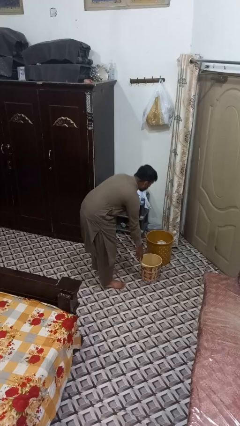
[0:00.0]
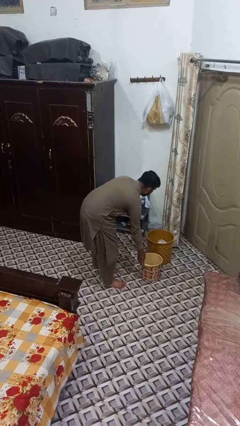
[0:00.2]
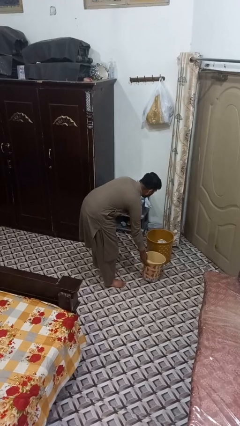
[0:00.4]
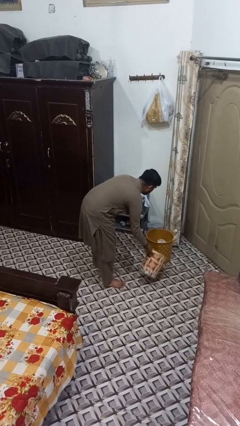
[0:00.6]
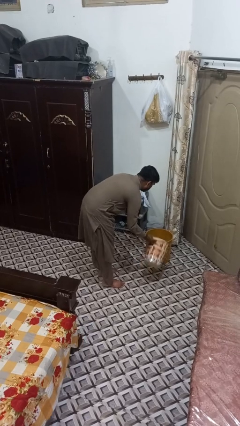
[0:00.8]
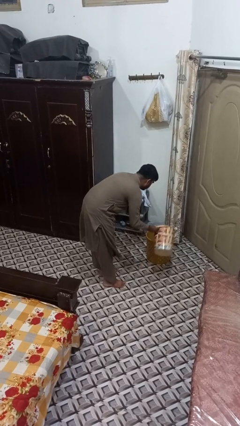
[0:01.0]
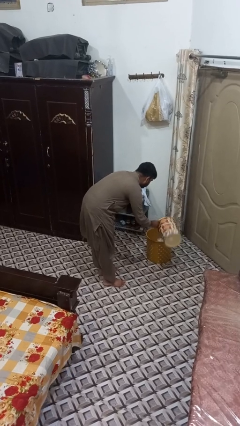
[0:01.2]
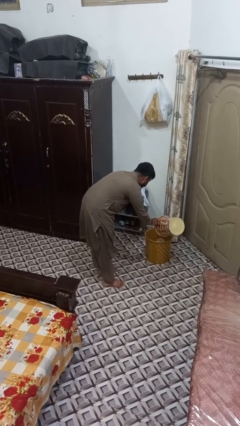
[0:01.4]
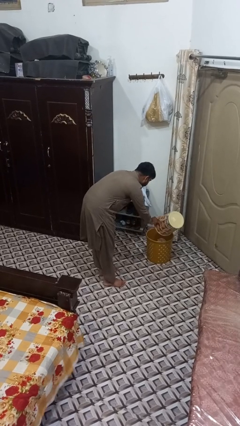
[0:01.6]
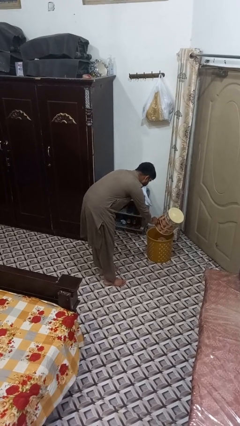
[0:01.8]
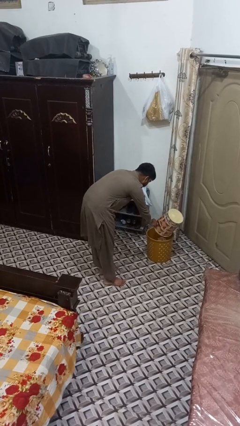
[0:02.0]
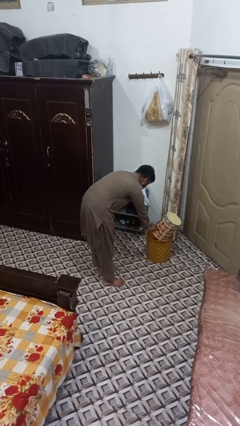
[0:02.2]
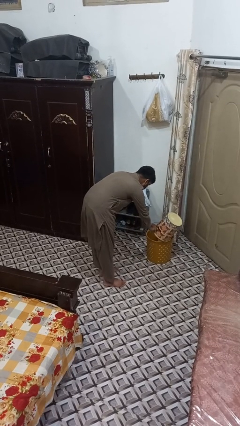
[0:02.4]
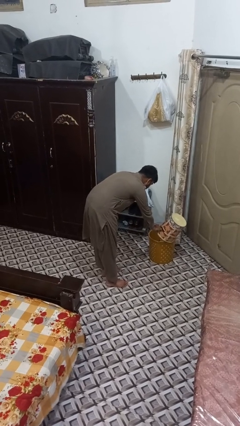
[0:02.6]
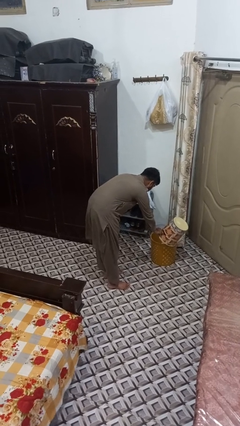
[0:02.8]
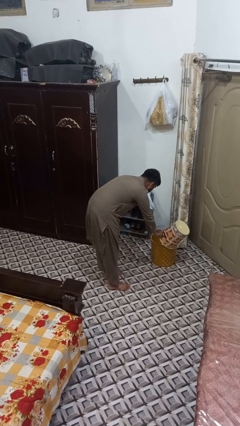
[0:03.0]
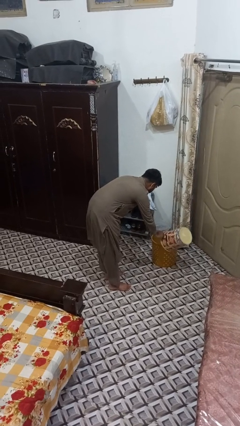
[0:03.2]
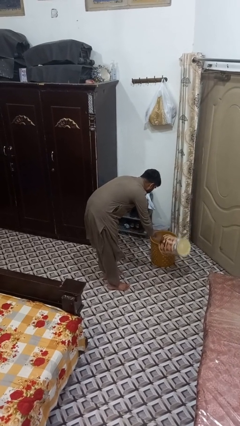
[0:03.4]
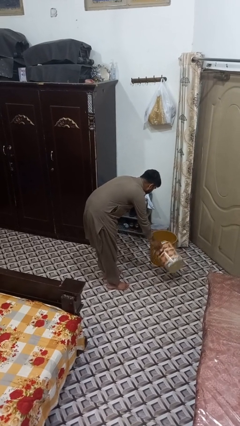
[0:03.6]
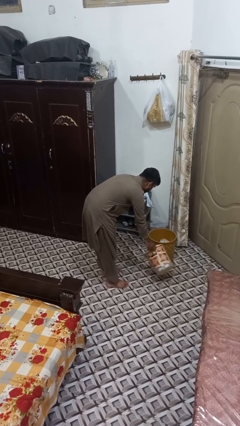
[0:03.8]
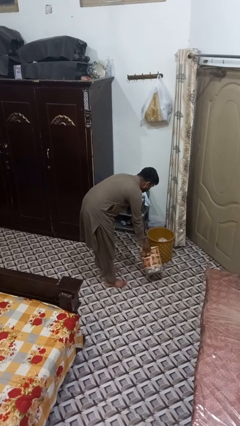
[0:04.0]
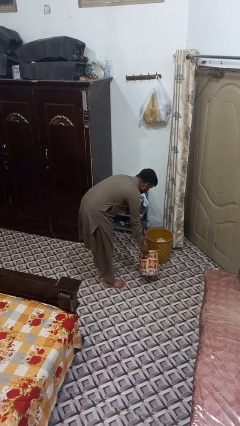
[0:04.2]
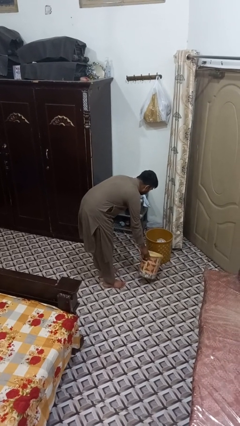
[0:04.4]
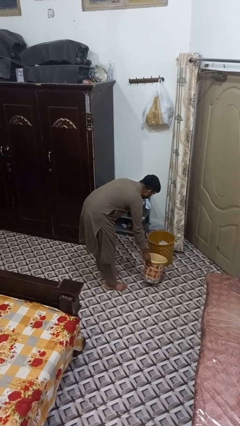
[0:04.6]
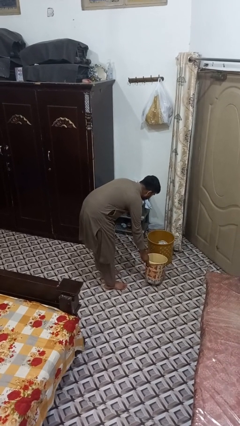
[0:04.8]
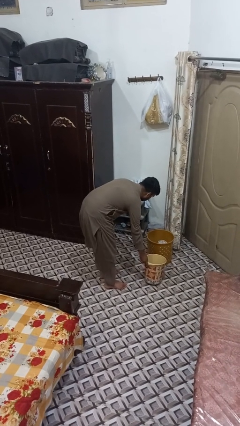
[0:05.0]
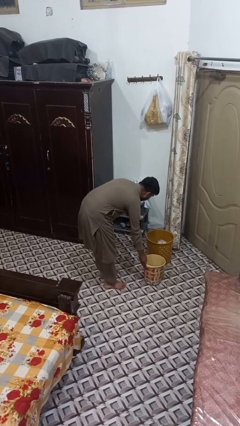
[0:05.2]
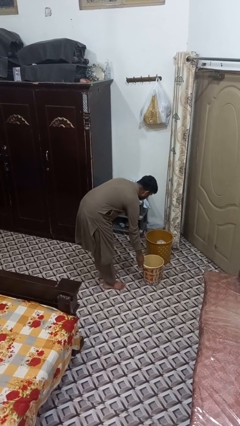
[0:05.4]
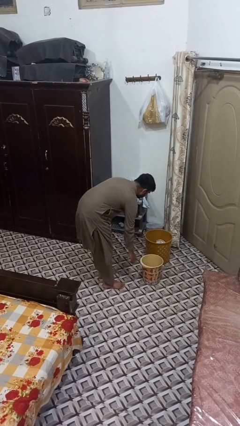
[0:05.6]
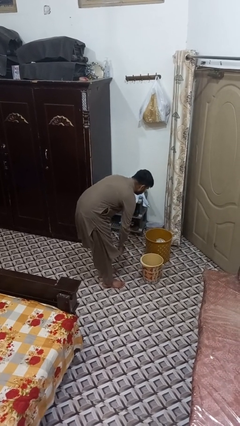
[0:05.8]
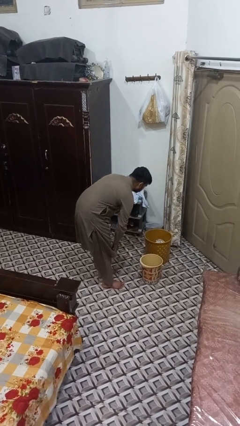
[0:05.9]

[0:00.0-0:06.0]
person removes trashbag from trashcan

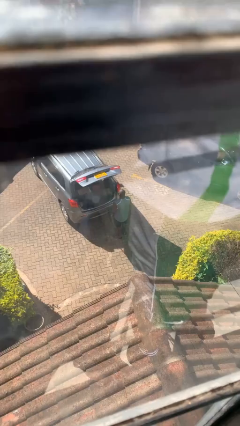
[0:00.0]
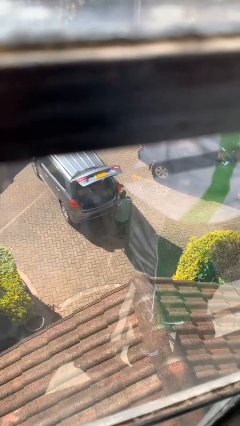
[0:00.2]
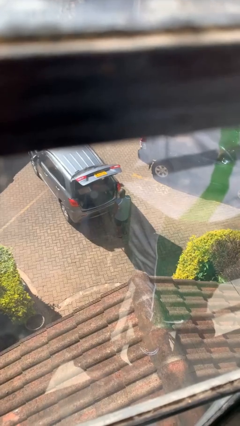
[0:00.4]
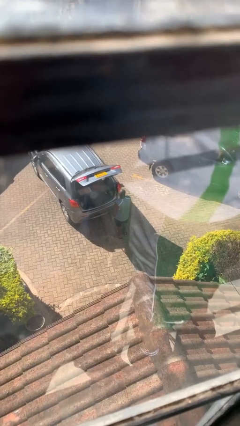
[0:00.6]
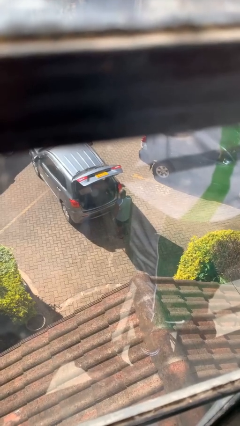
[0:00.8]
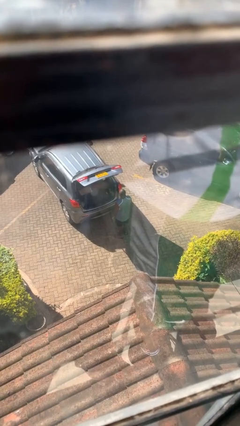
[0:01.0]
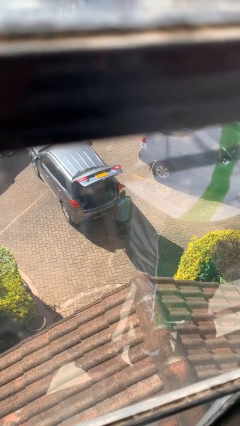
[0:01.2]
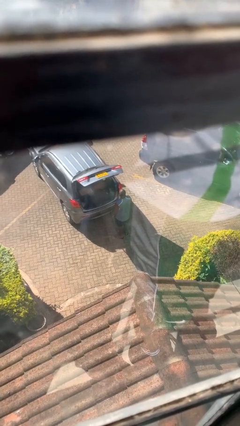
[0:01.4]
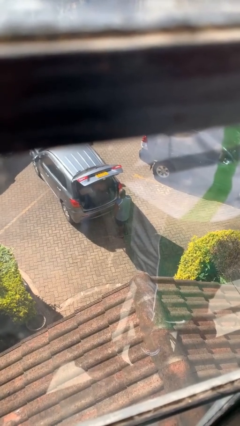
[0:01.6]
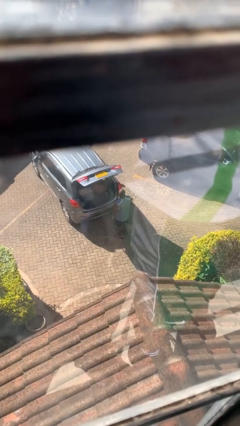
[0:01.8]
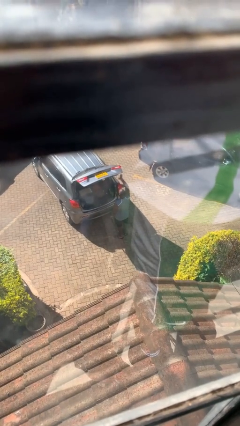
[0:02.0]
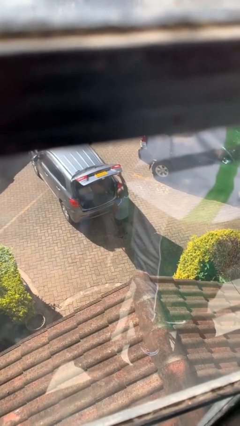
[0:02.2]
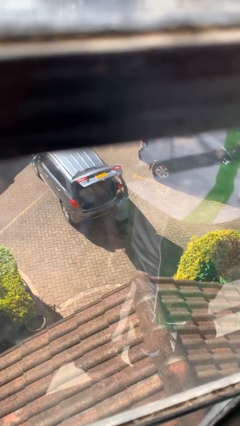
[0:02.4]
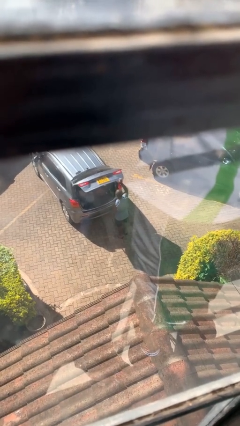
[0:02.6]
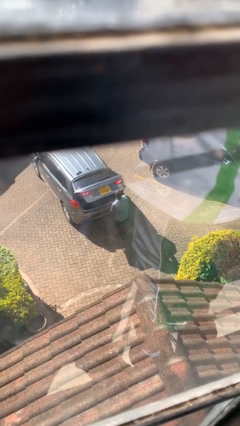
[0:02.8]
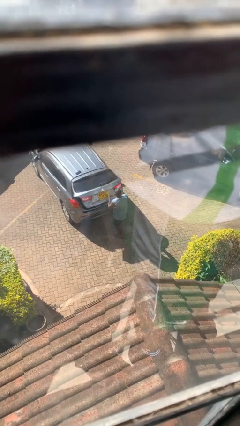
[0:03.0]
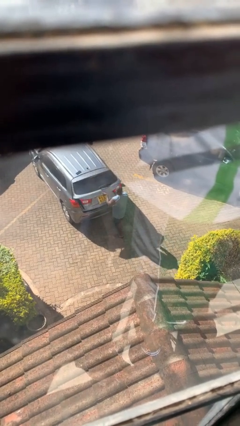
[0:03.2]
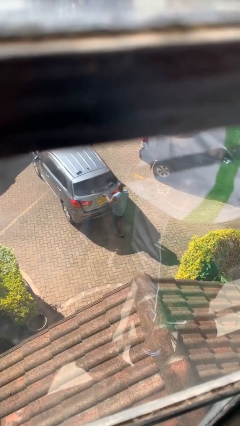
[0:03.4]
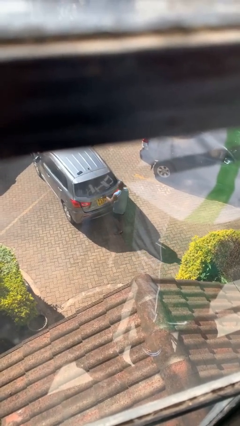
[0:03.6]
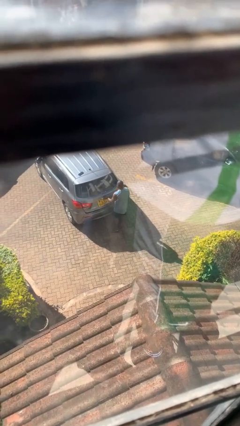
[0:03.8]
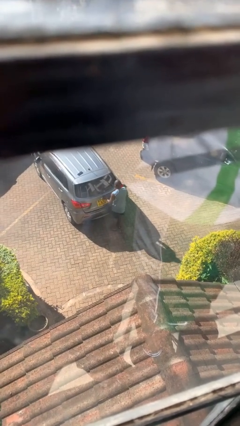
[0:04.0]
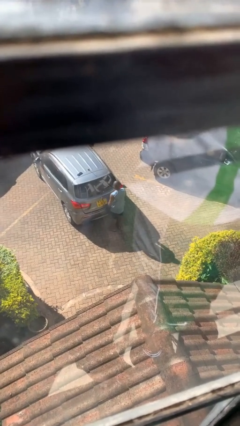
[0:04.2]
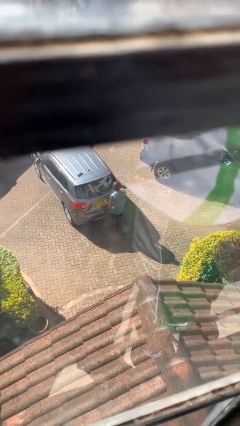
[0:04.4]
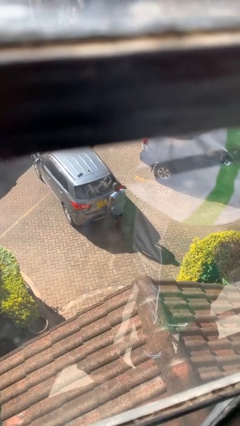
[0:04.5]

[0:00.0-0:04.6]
person closes car trunk

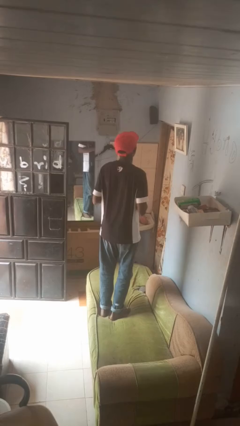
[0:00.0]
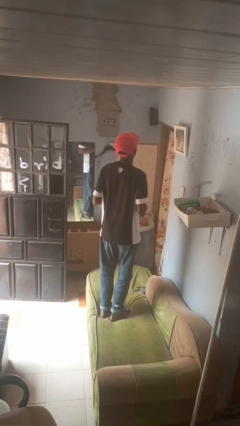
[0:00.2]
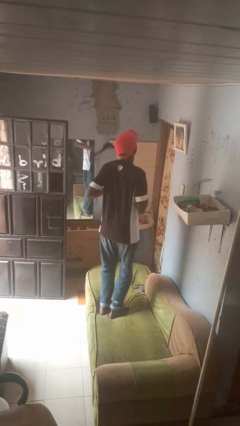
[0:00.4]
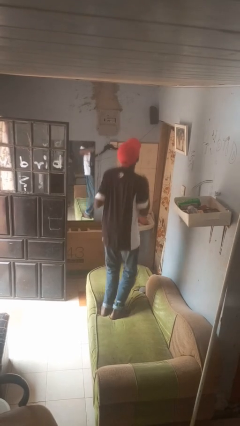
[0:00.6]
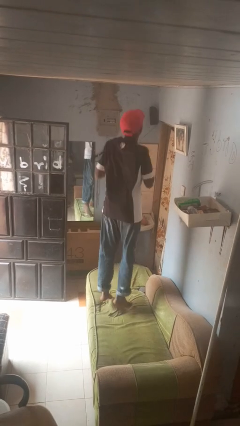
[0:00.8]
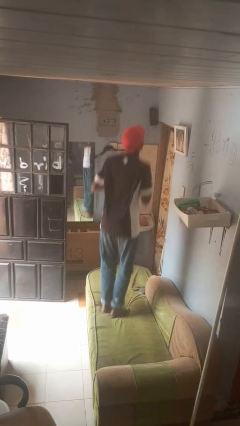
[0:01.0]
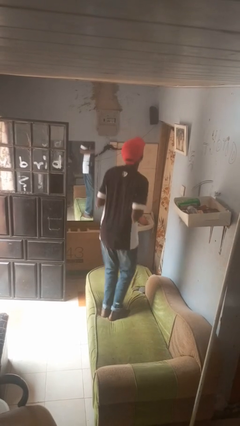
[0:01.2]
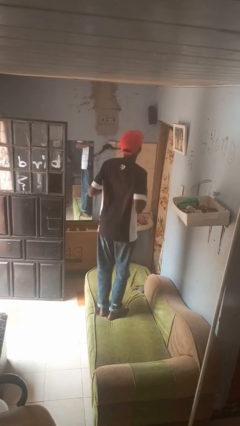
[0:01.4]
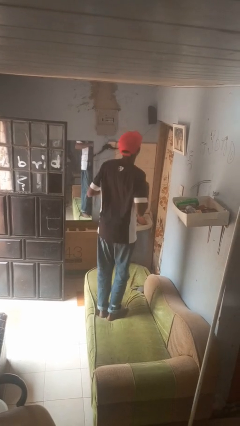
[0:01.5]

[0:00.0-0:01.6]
person jumps on couch

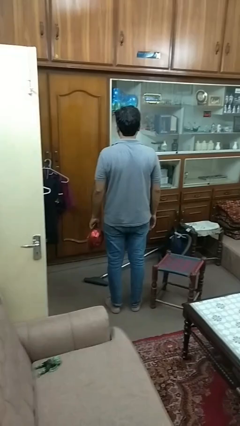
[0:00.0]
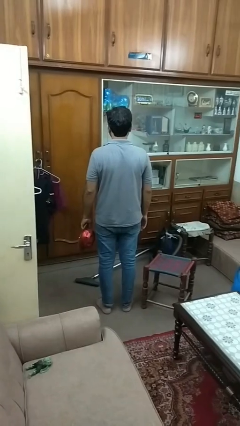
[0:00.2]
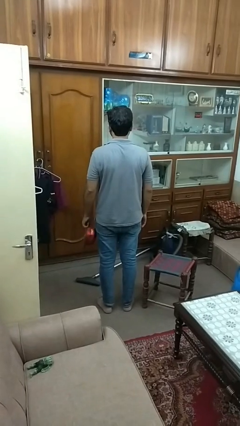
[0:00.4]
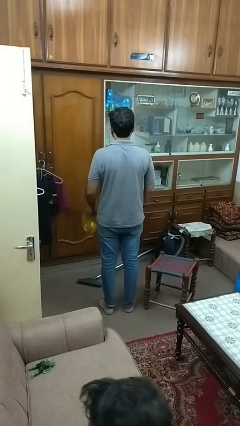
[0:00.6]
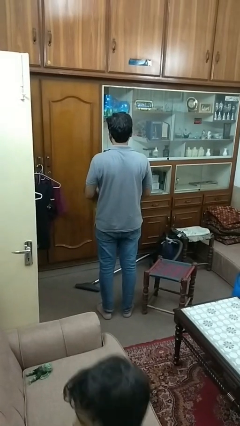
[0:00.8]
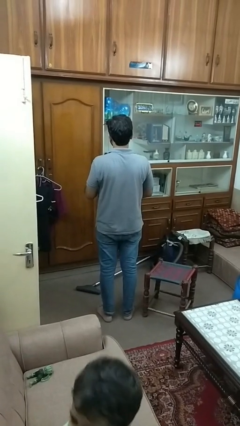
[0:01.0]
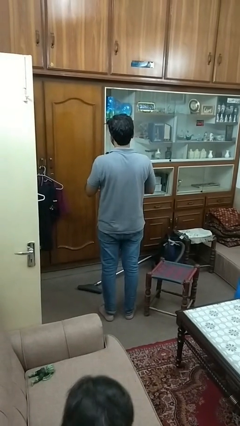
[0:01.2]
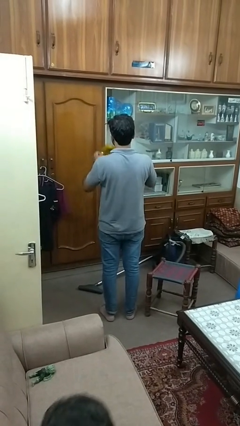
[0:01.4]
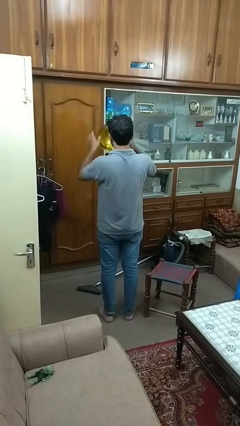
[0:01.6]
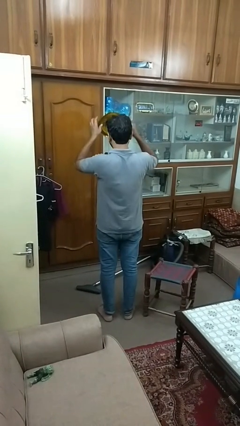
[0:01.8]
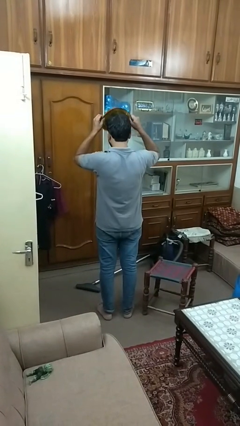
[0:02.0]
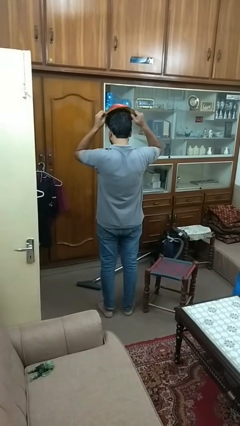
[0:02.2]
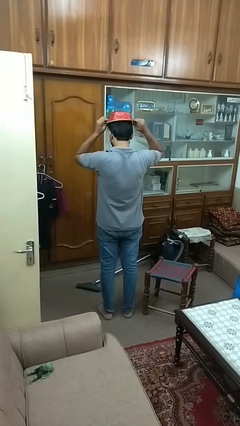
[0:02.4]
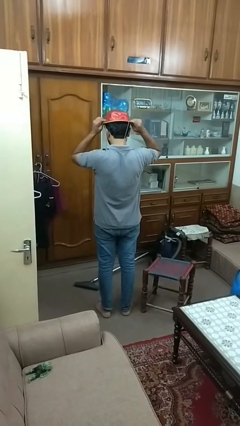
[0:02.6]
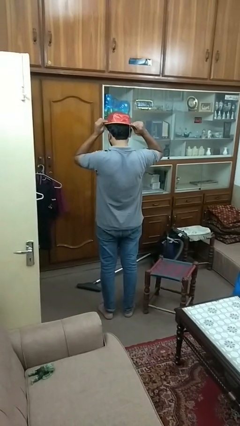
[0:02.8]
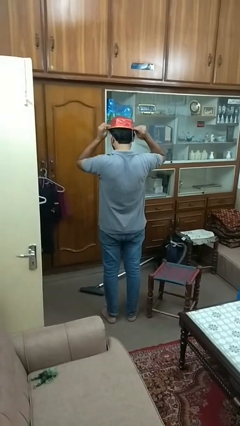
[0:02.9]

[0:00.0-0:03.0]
person puts on hat

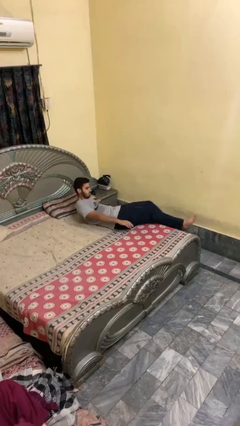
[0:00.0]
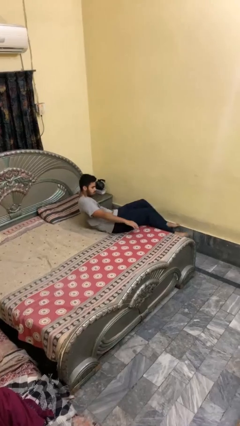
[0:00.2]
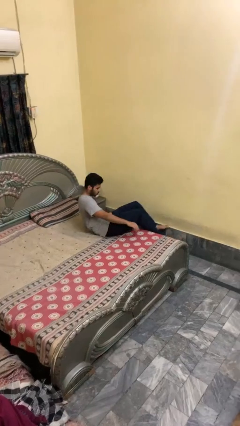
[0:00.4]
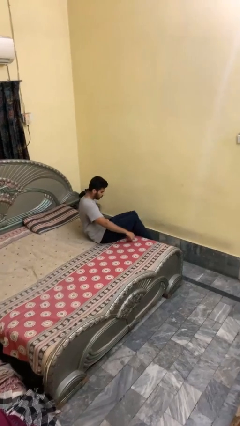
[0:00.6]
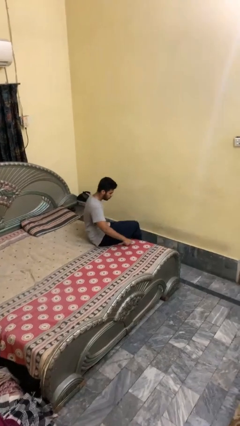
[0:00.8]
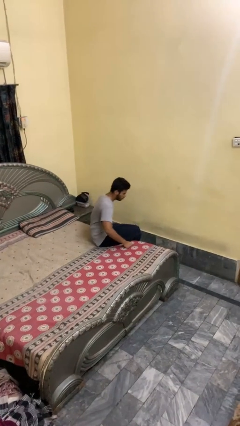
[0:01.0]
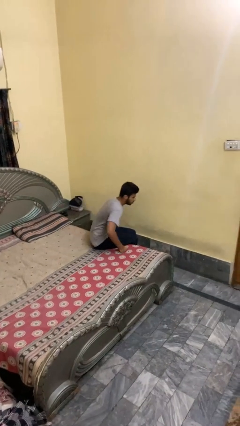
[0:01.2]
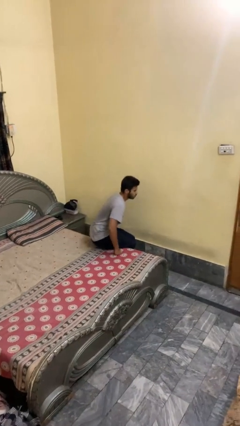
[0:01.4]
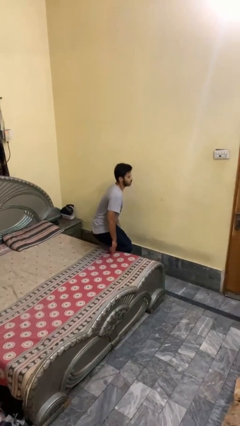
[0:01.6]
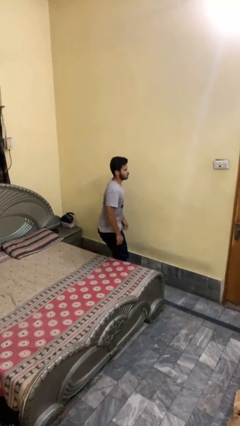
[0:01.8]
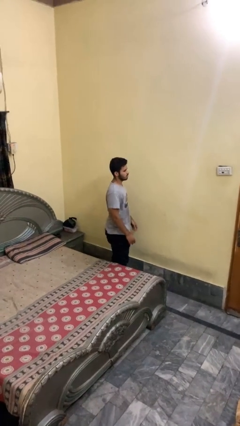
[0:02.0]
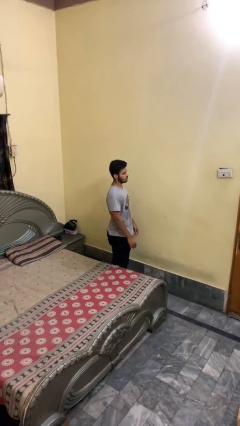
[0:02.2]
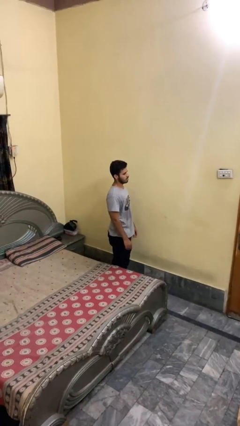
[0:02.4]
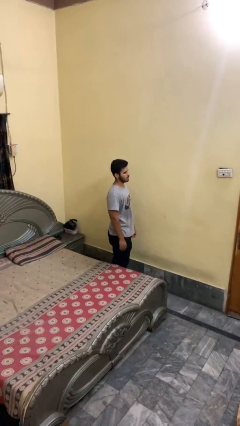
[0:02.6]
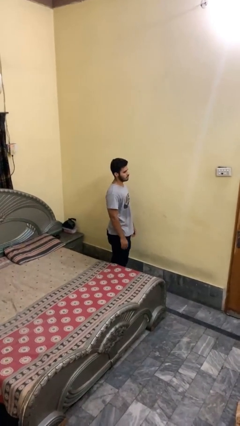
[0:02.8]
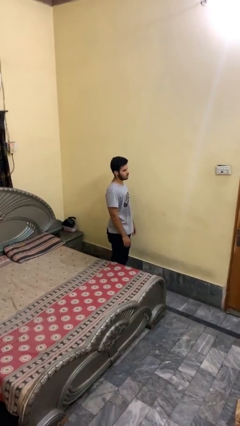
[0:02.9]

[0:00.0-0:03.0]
person stands up
